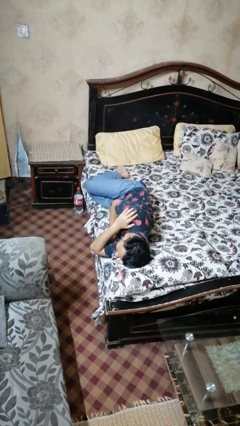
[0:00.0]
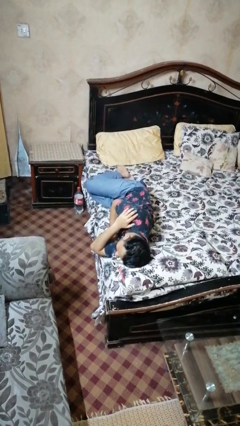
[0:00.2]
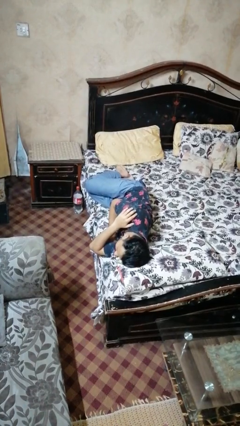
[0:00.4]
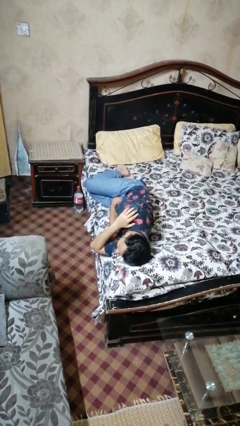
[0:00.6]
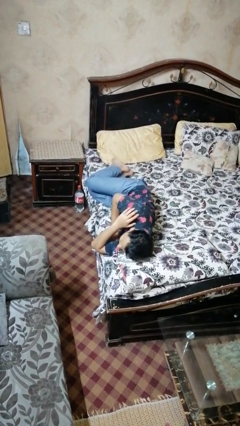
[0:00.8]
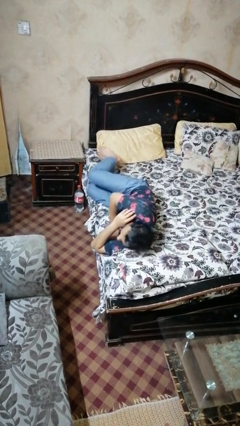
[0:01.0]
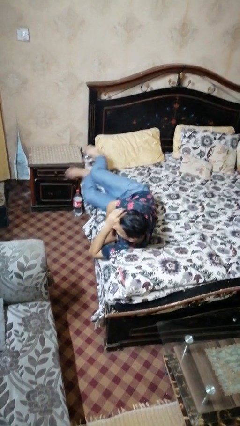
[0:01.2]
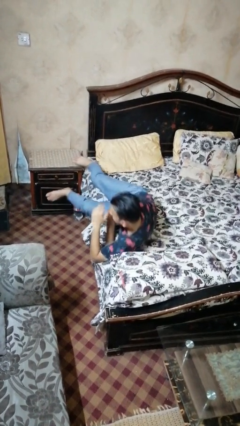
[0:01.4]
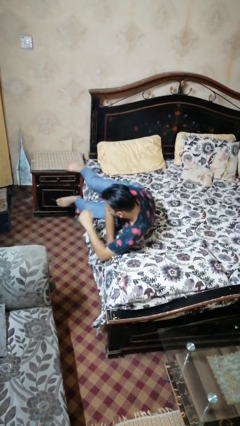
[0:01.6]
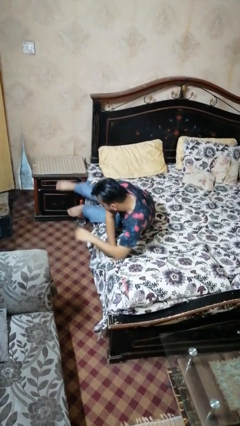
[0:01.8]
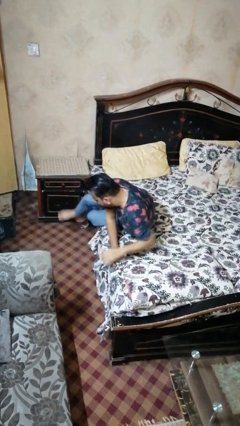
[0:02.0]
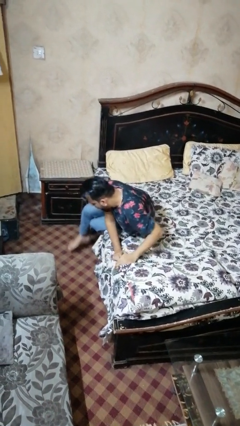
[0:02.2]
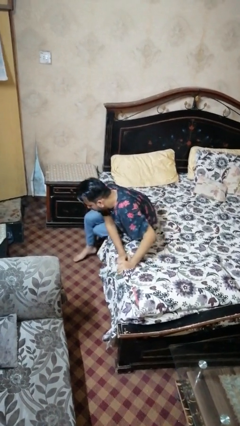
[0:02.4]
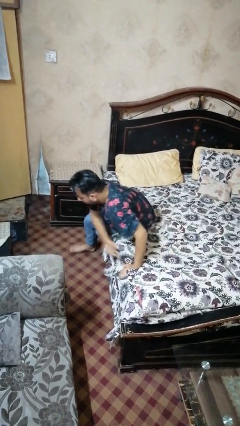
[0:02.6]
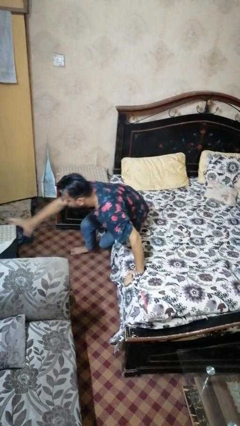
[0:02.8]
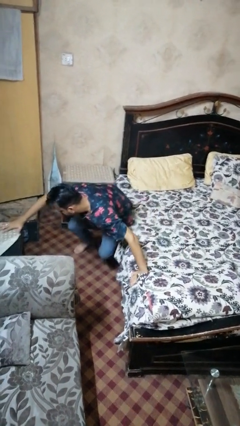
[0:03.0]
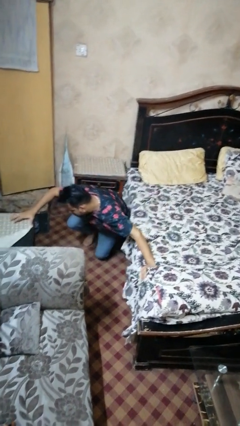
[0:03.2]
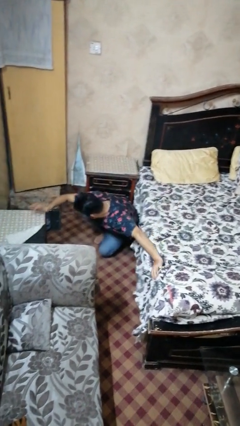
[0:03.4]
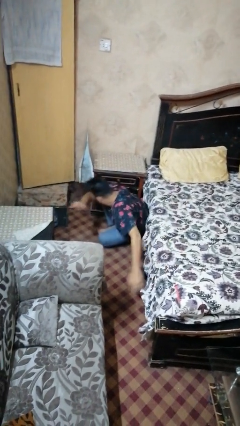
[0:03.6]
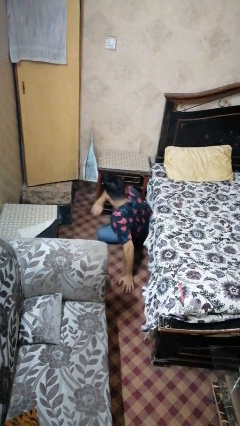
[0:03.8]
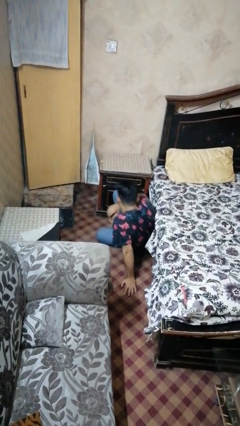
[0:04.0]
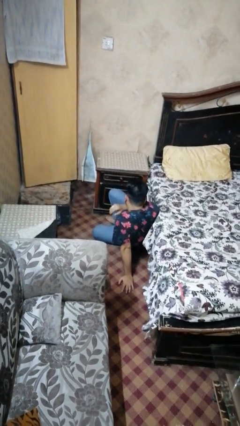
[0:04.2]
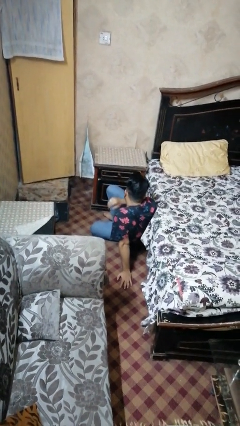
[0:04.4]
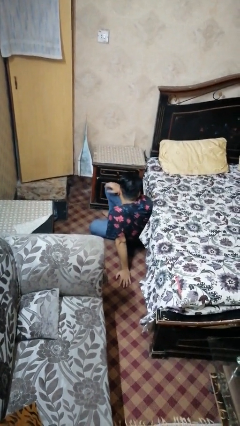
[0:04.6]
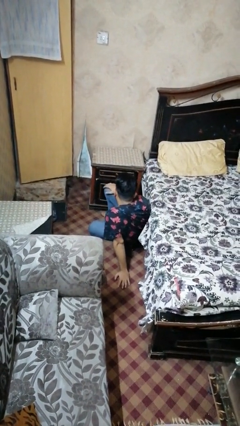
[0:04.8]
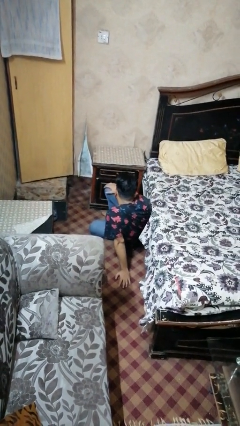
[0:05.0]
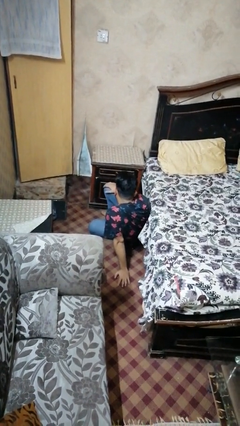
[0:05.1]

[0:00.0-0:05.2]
person falls from bed

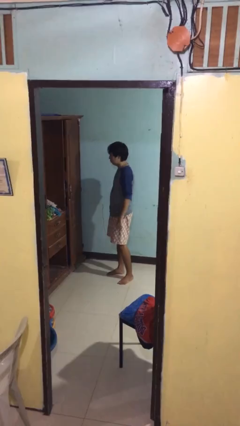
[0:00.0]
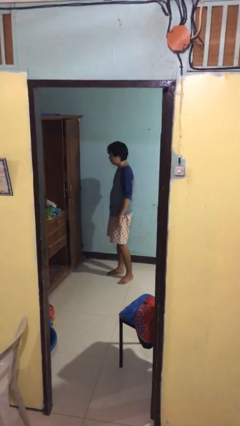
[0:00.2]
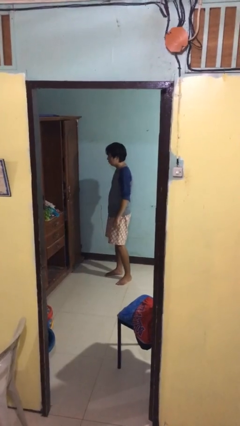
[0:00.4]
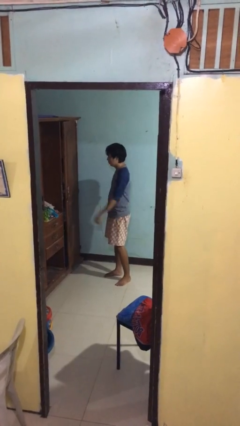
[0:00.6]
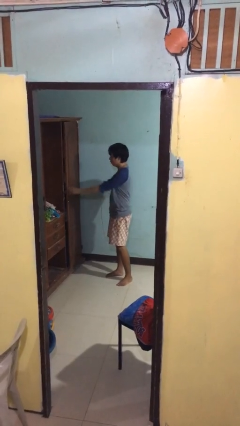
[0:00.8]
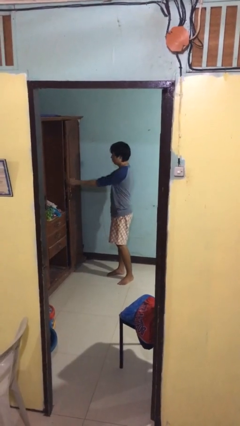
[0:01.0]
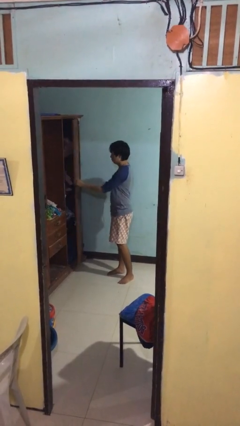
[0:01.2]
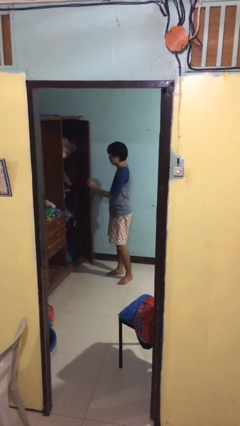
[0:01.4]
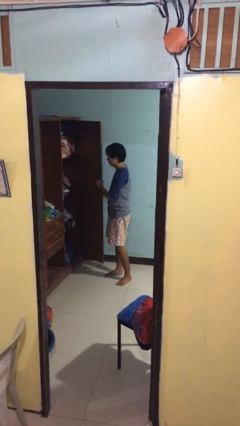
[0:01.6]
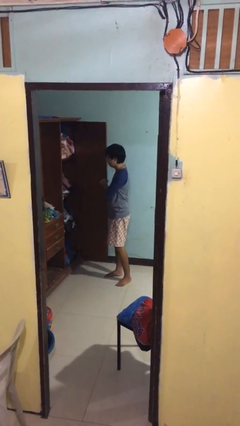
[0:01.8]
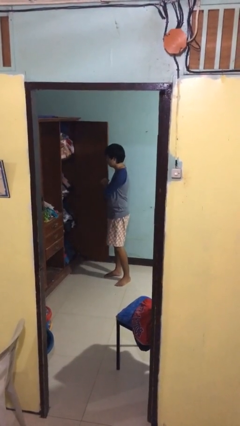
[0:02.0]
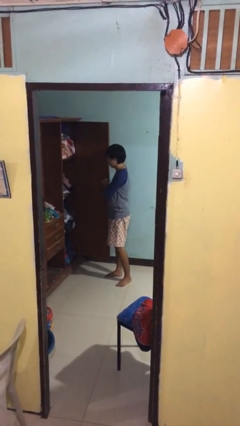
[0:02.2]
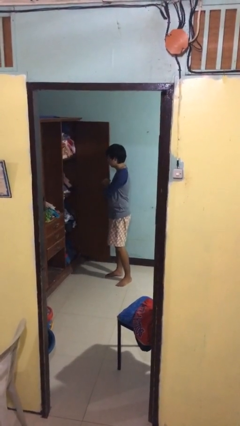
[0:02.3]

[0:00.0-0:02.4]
person opens closet door

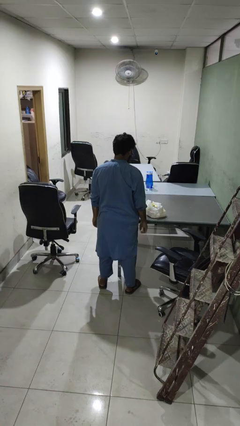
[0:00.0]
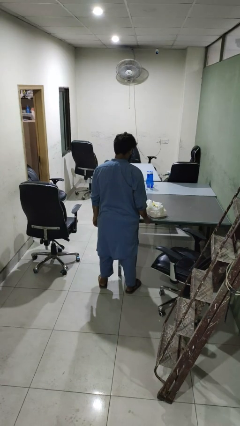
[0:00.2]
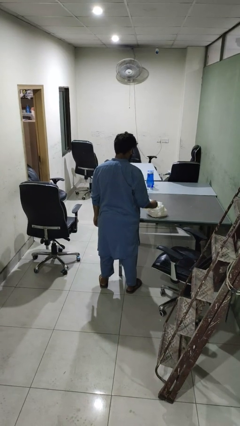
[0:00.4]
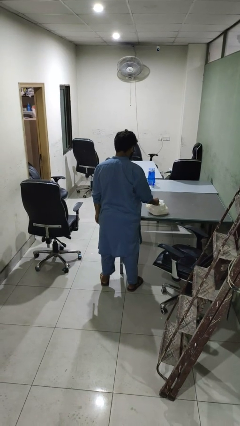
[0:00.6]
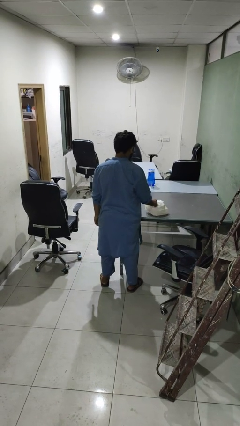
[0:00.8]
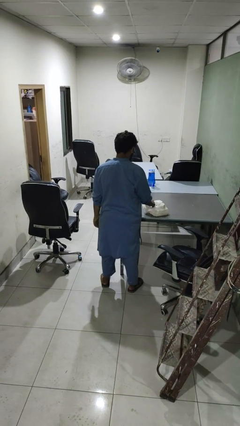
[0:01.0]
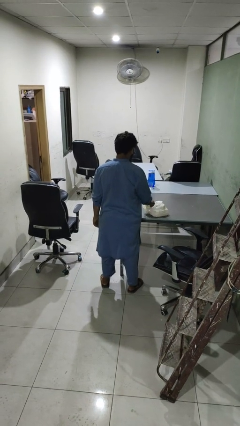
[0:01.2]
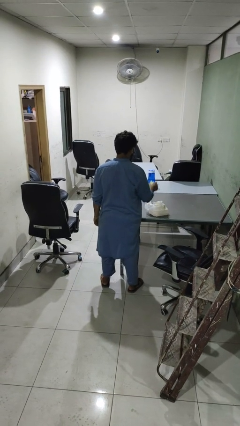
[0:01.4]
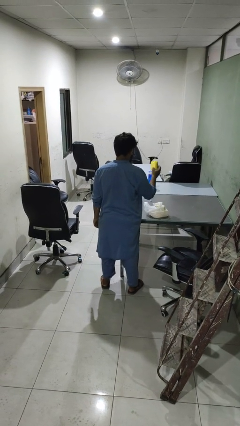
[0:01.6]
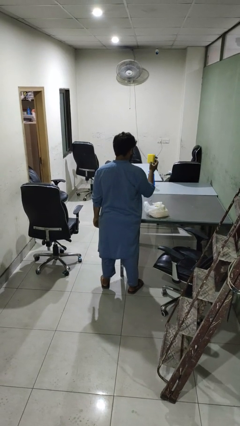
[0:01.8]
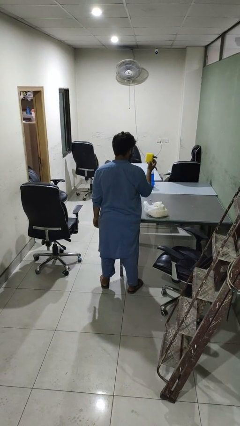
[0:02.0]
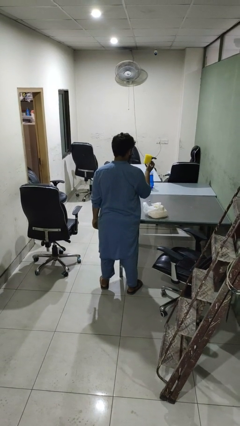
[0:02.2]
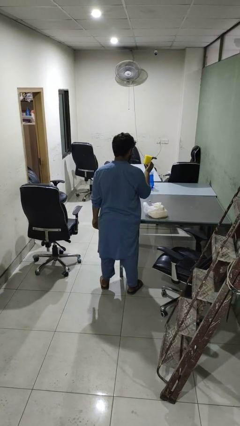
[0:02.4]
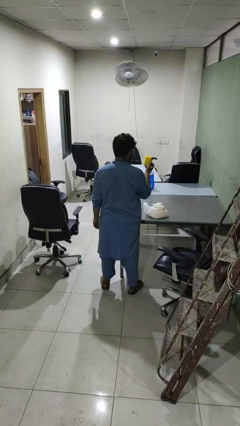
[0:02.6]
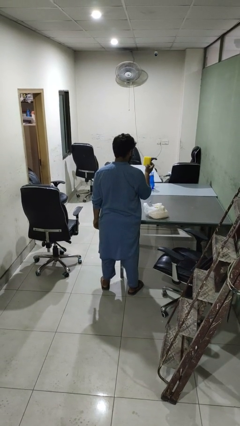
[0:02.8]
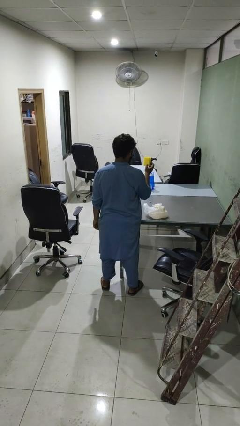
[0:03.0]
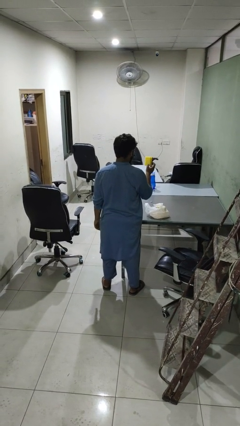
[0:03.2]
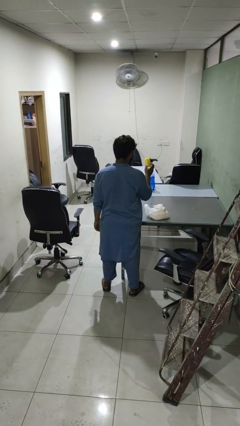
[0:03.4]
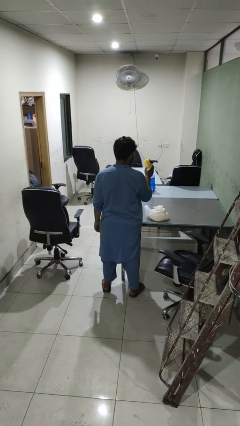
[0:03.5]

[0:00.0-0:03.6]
person takes object from bag

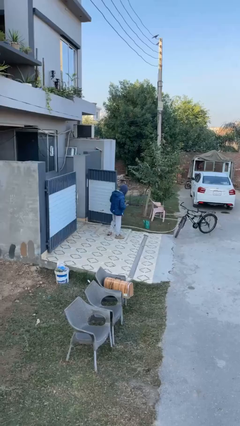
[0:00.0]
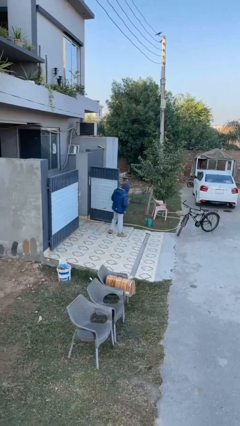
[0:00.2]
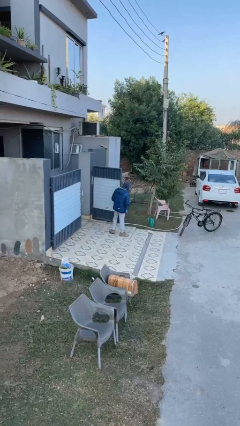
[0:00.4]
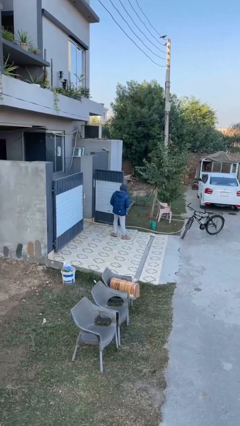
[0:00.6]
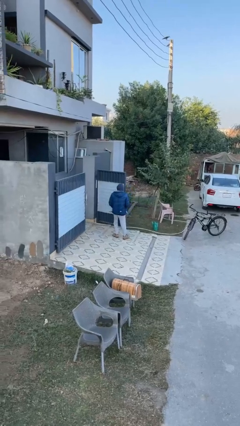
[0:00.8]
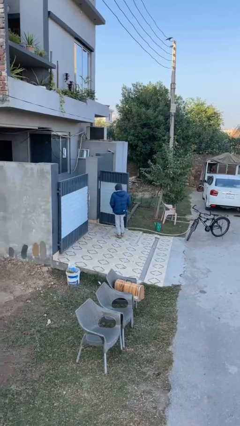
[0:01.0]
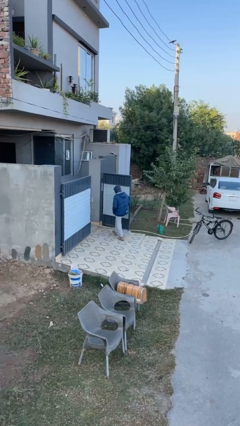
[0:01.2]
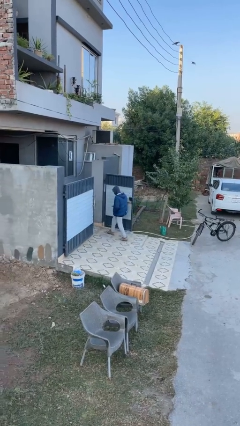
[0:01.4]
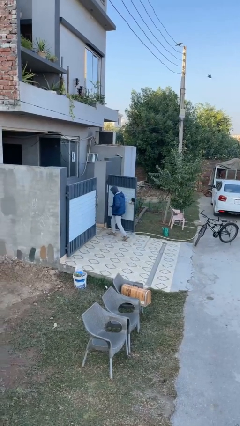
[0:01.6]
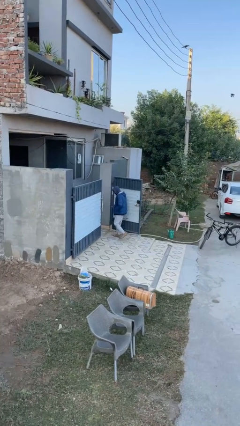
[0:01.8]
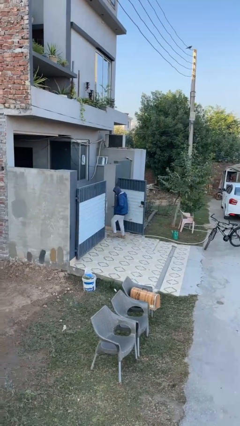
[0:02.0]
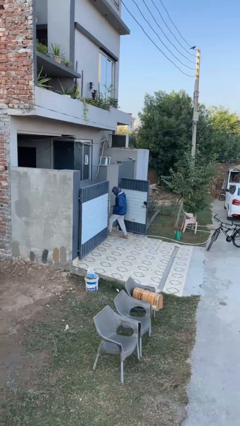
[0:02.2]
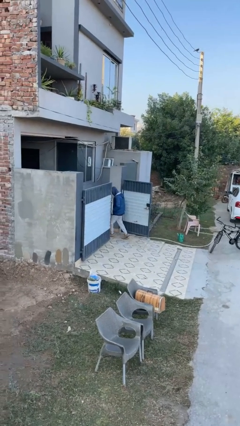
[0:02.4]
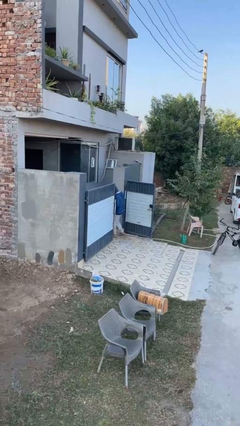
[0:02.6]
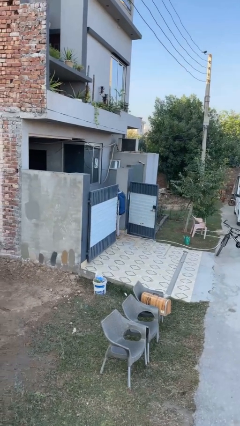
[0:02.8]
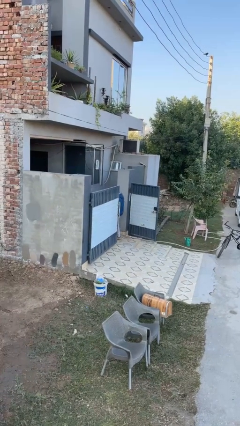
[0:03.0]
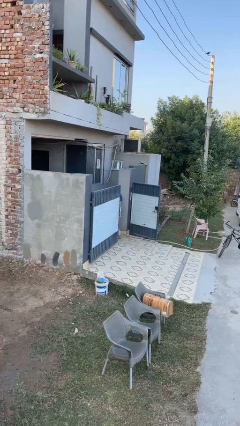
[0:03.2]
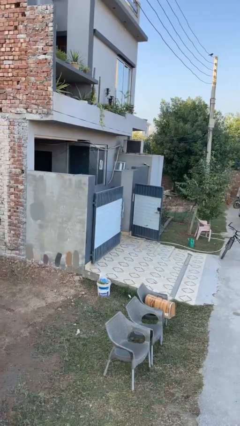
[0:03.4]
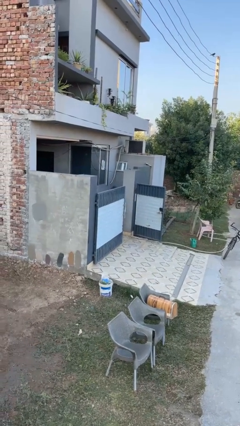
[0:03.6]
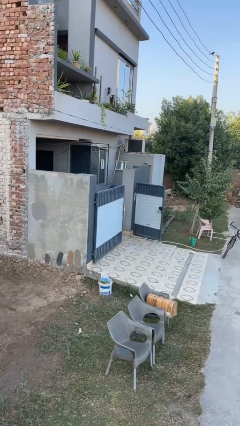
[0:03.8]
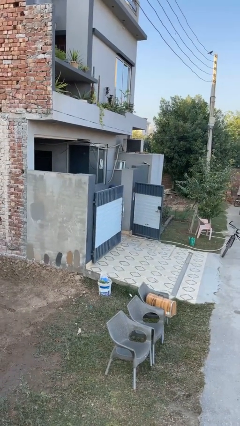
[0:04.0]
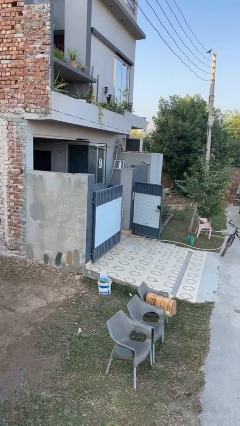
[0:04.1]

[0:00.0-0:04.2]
person exits scene through structure

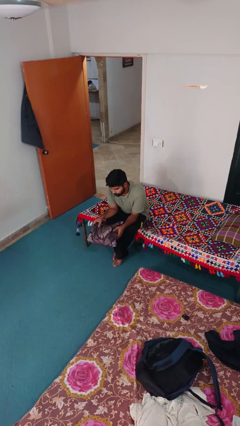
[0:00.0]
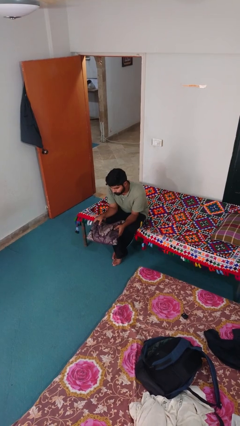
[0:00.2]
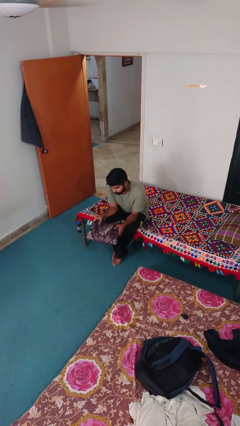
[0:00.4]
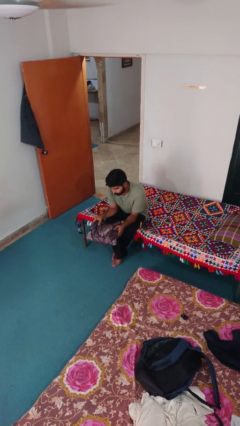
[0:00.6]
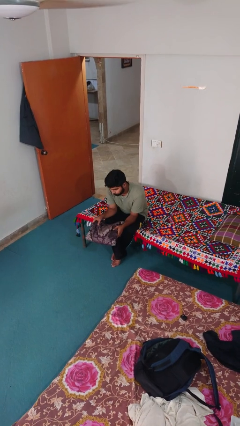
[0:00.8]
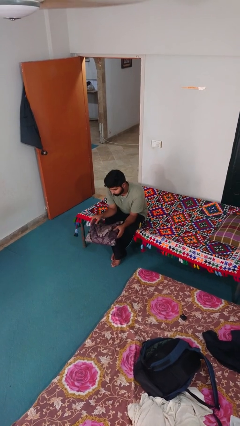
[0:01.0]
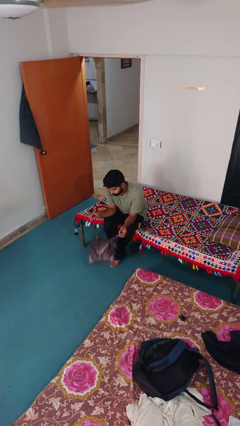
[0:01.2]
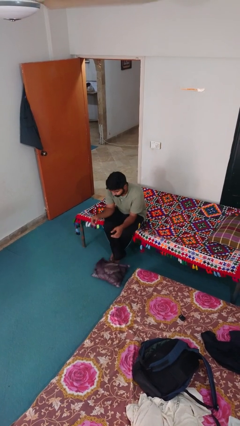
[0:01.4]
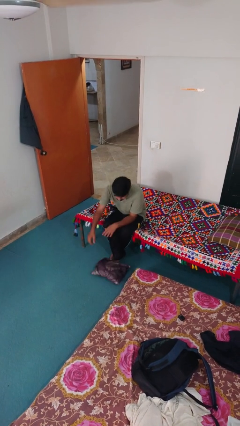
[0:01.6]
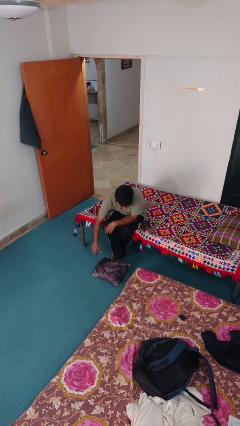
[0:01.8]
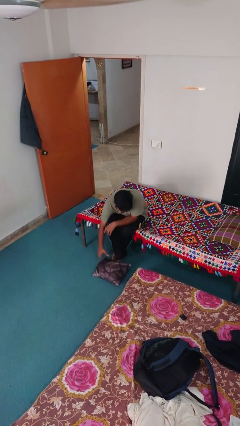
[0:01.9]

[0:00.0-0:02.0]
person drops object

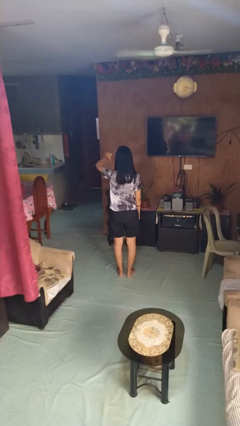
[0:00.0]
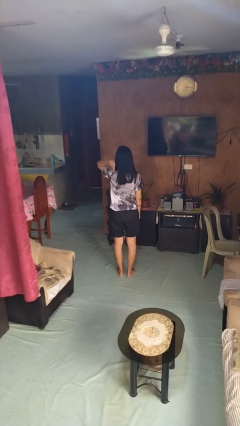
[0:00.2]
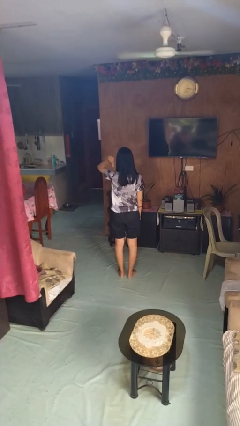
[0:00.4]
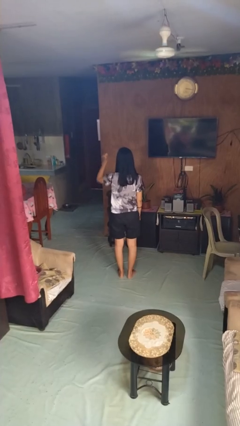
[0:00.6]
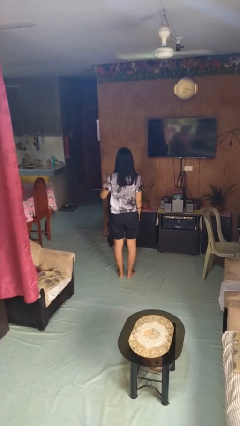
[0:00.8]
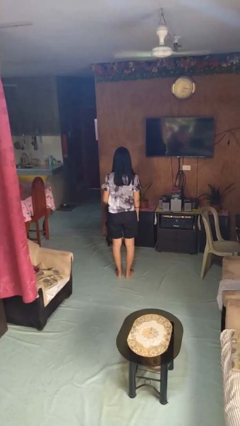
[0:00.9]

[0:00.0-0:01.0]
person gestures behind me
